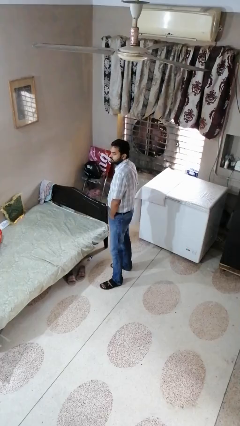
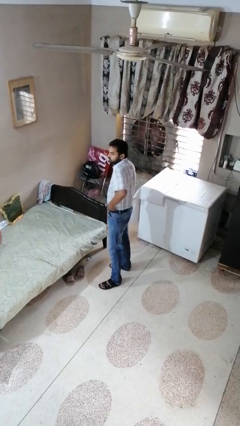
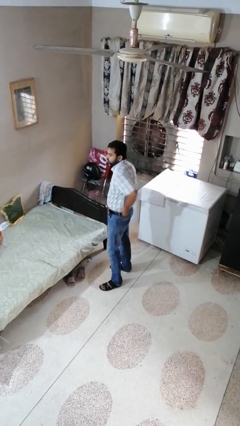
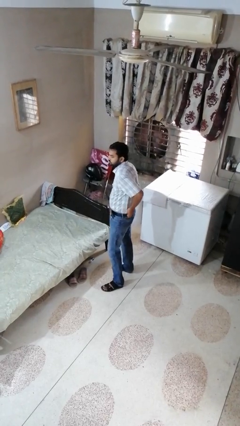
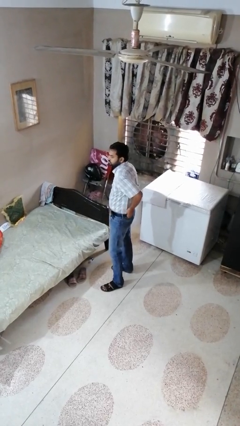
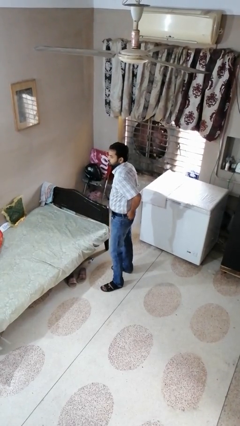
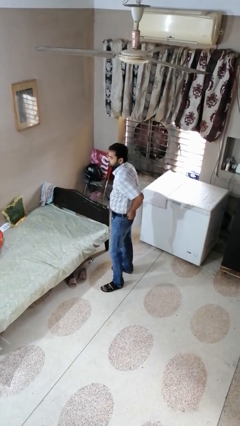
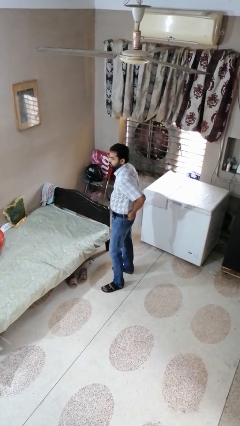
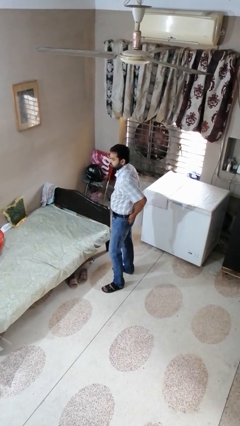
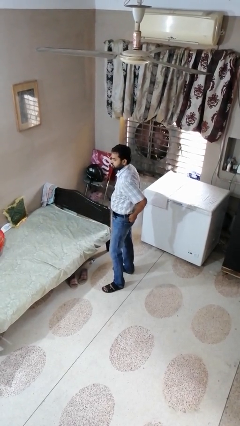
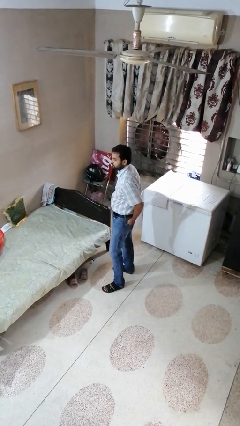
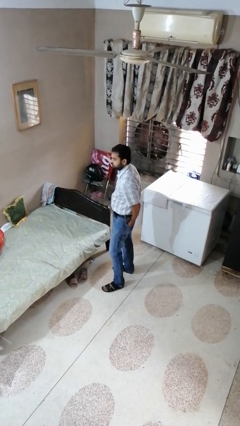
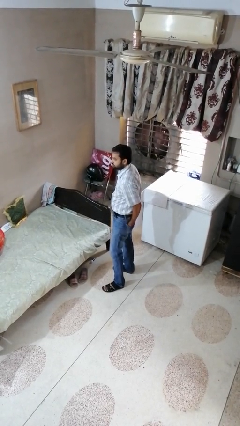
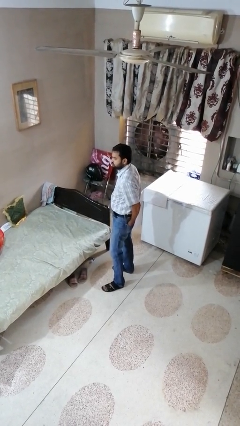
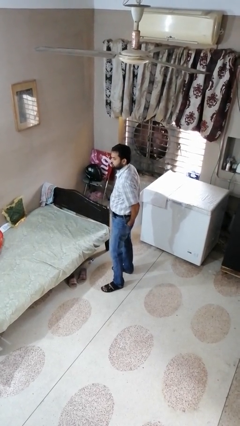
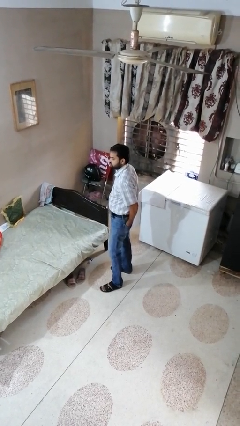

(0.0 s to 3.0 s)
person puts hands in back pockets

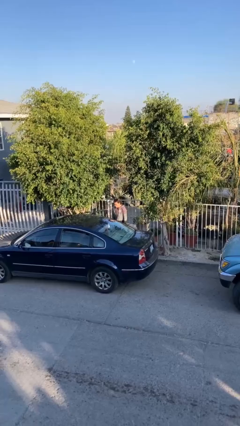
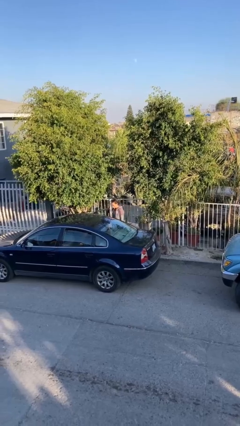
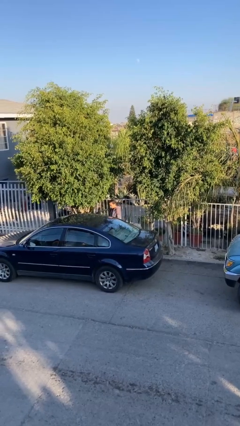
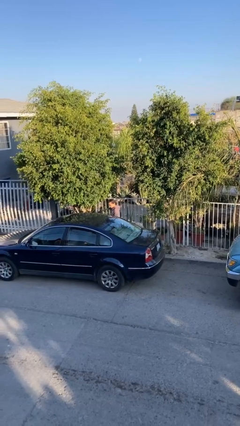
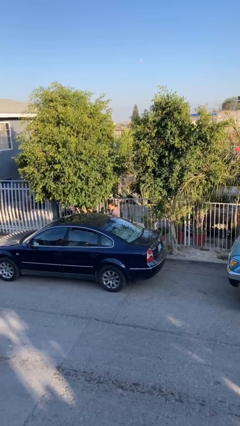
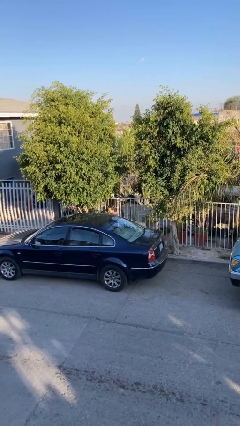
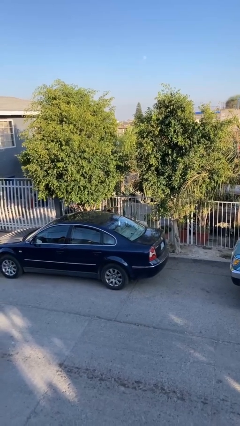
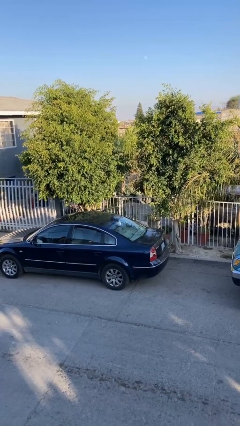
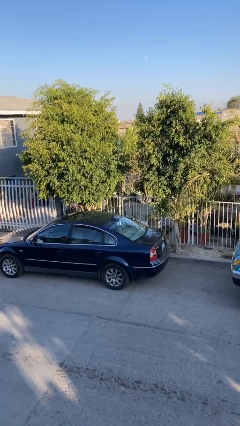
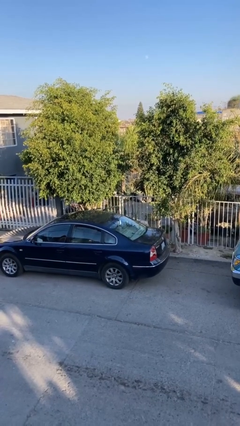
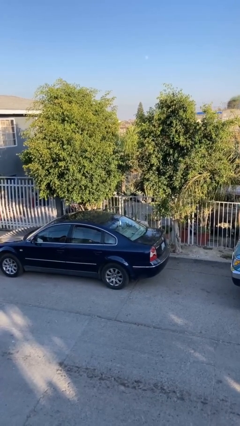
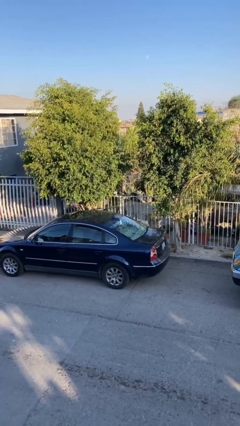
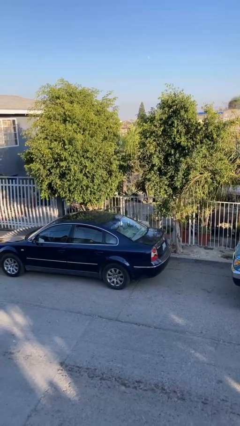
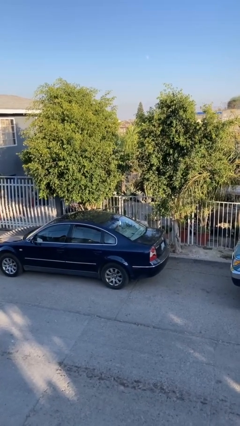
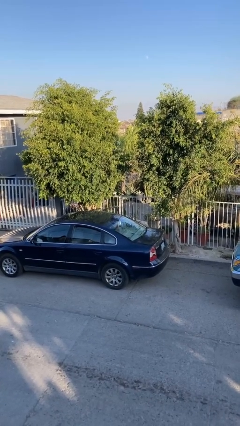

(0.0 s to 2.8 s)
person enters car

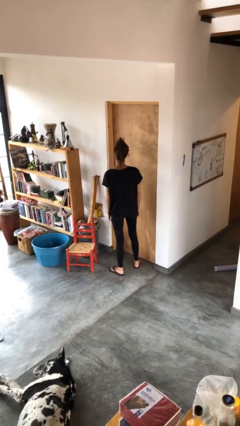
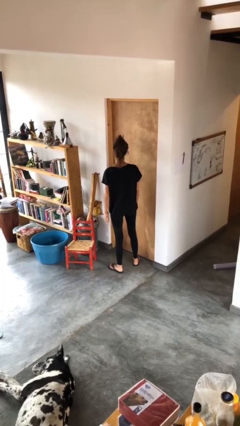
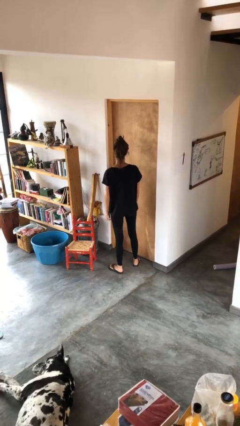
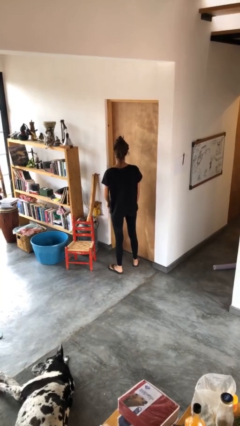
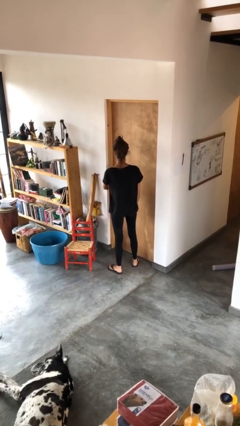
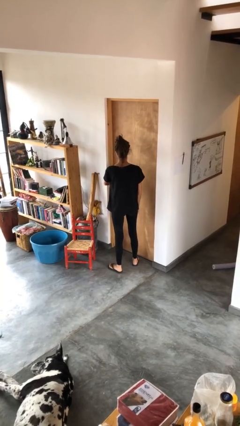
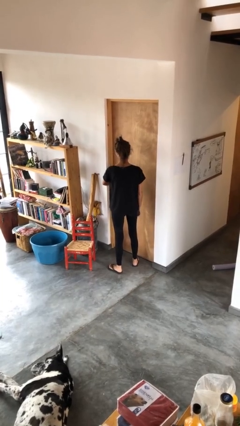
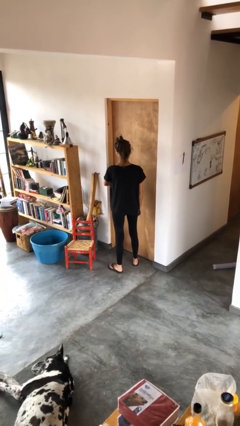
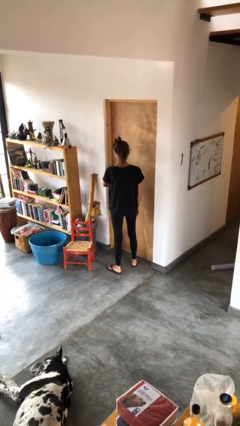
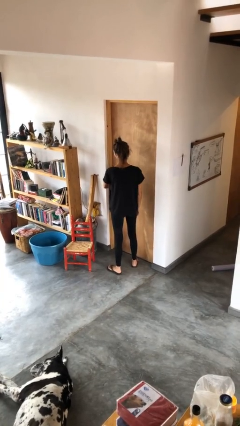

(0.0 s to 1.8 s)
person locks door with keys

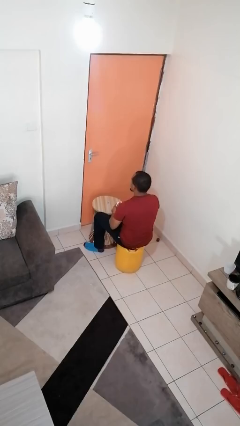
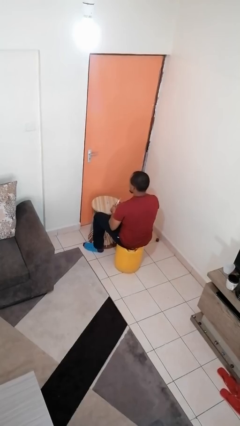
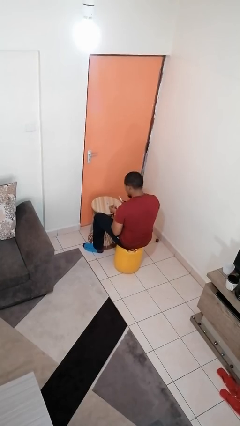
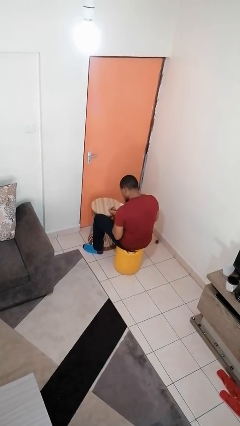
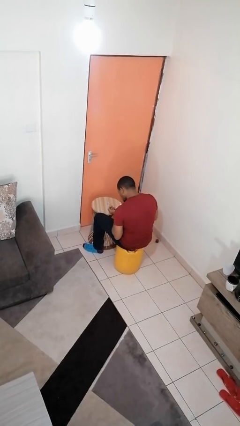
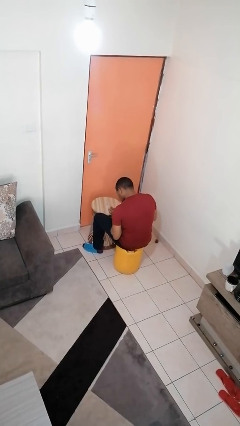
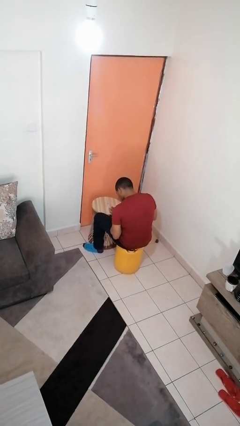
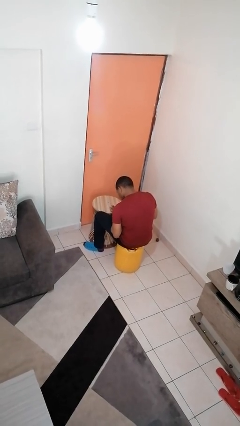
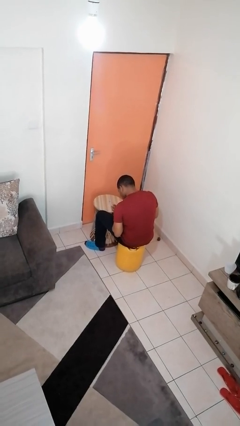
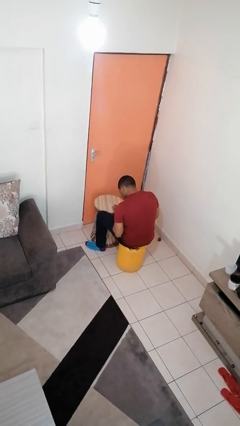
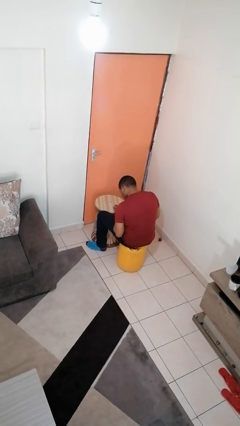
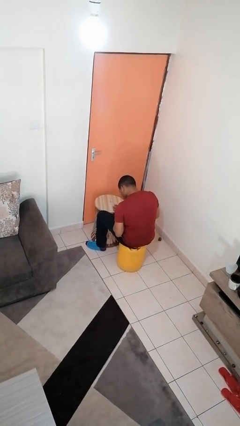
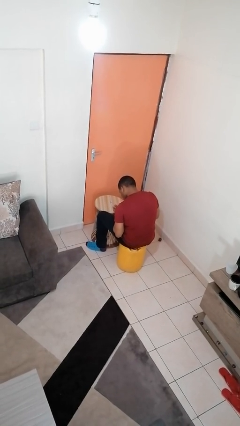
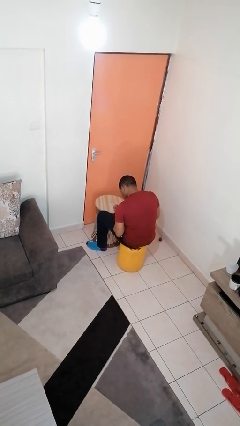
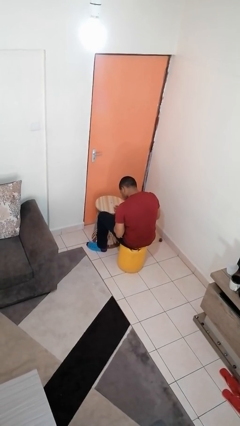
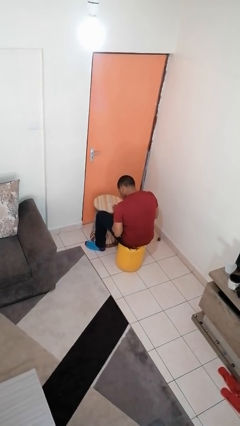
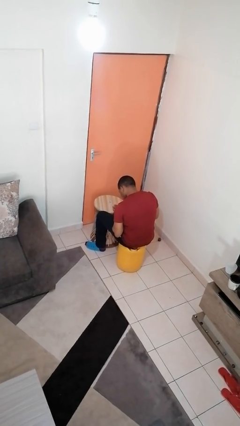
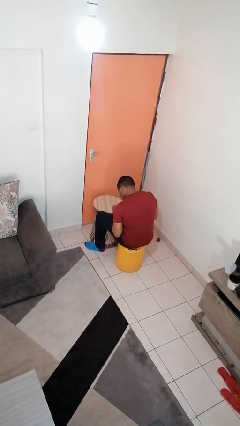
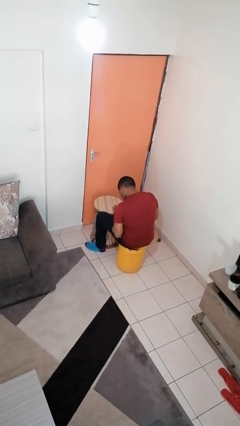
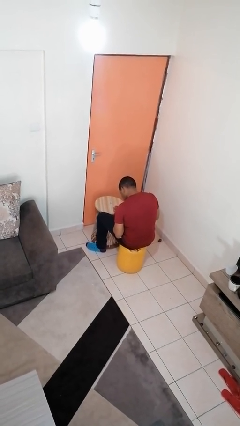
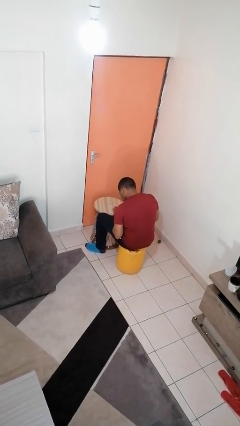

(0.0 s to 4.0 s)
person paints fingernails

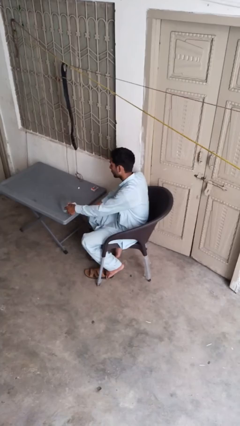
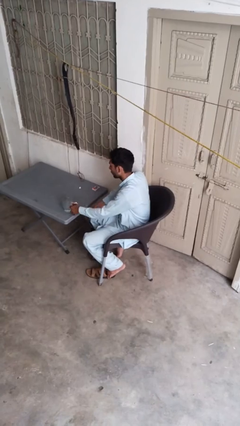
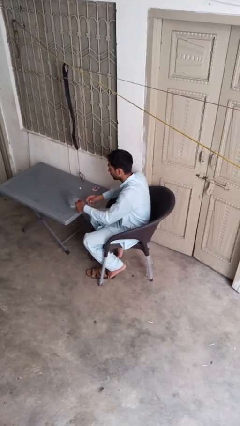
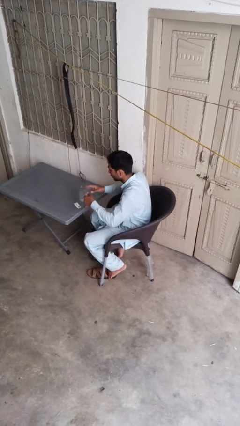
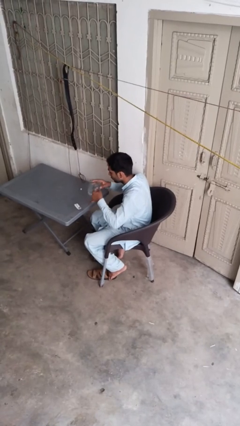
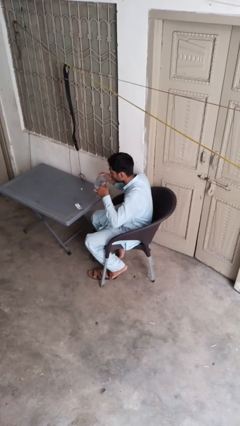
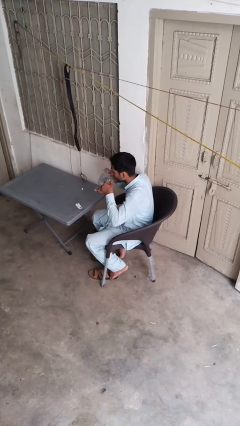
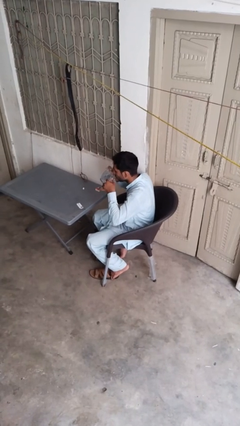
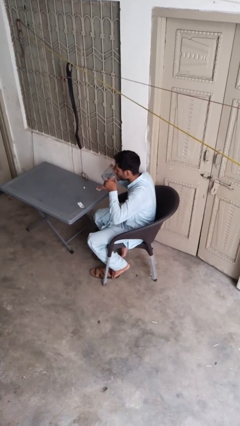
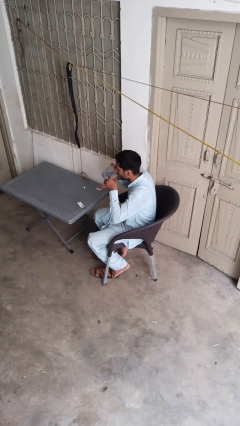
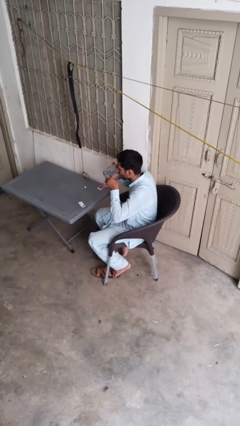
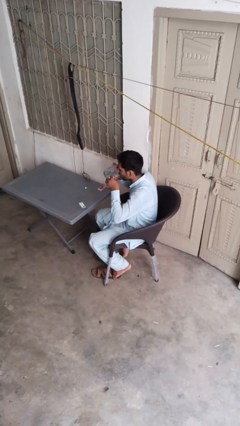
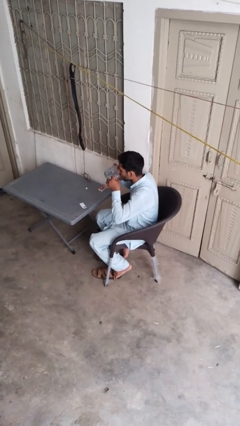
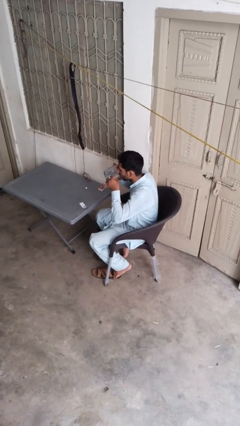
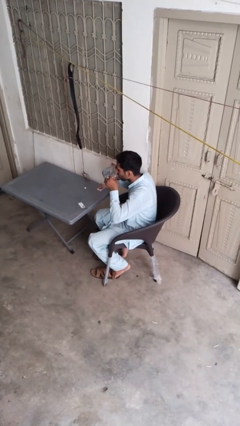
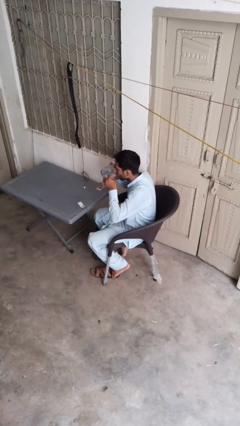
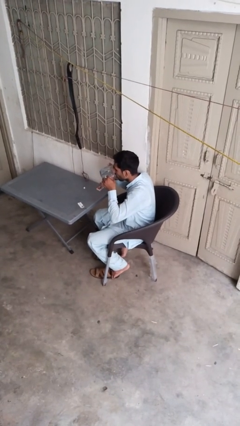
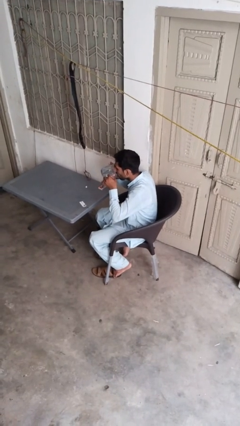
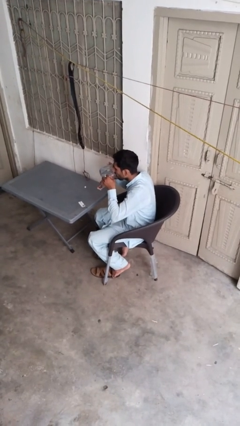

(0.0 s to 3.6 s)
person drinks from cup

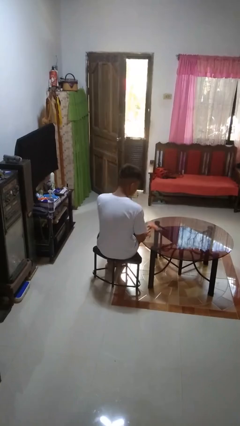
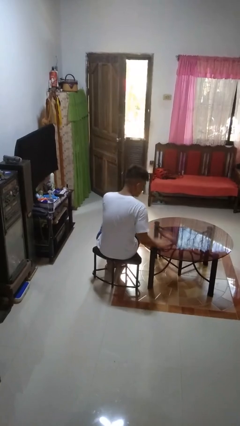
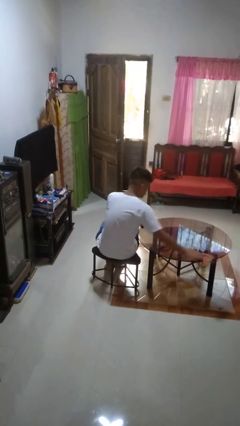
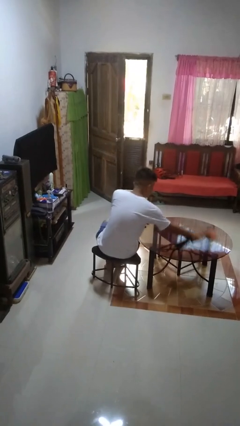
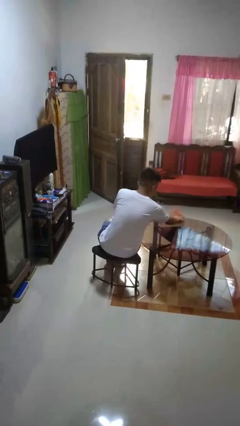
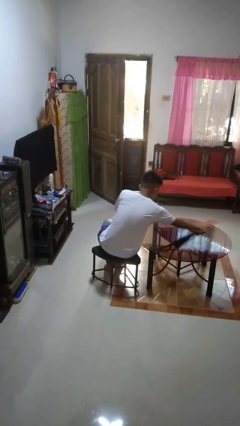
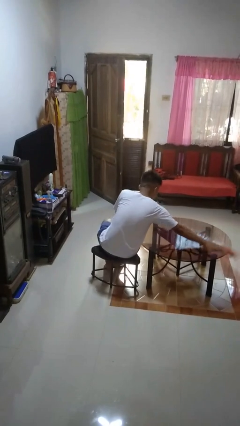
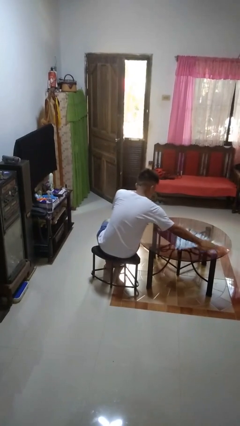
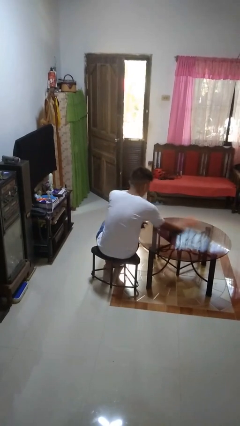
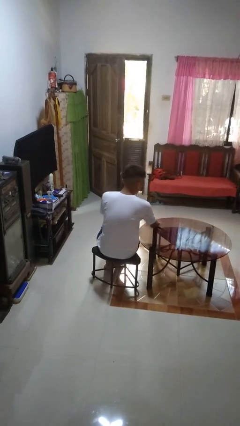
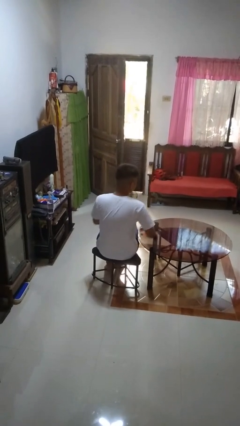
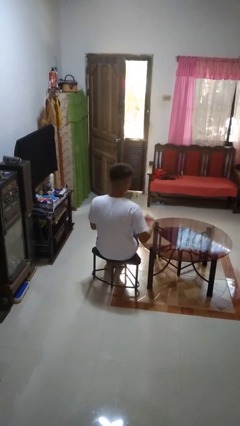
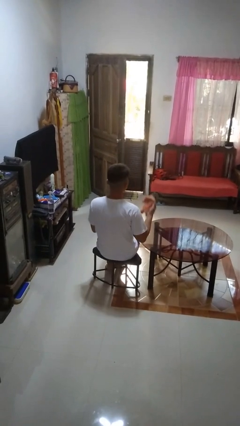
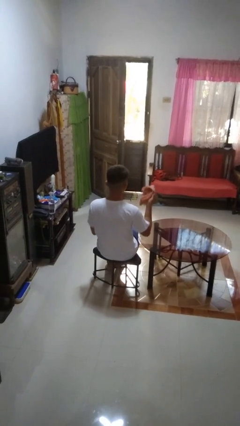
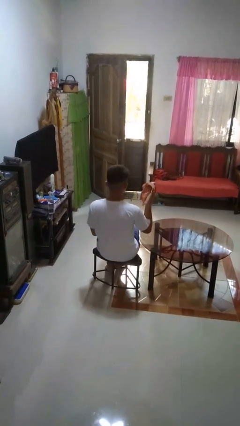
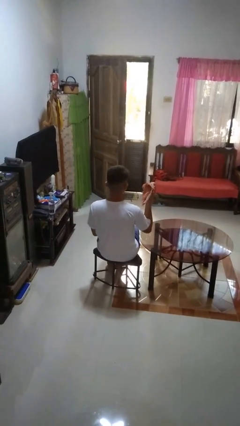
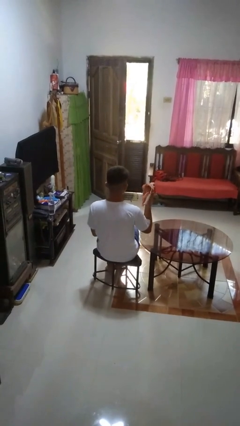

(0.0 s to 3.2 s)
person cleans table with rag
